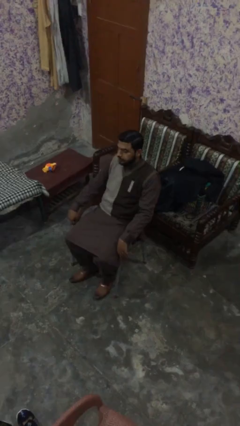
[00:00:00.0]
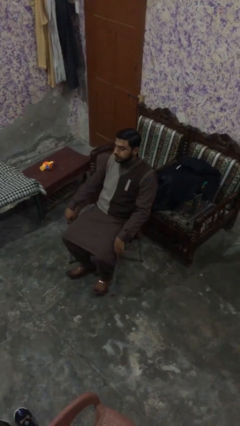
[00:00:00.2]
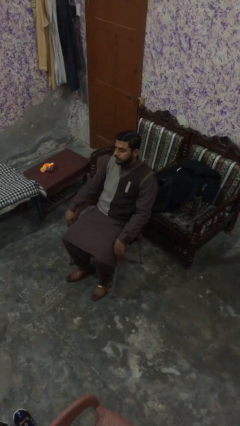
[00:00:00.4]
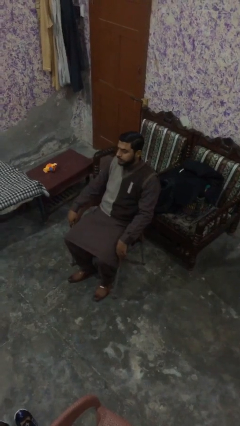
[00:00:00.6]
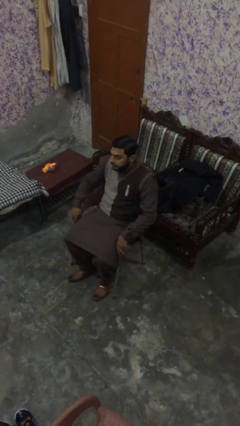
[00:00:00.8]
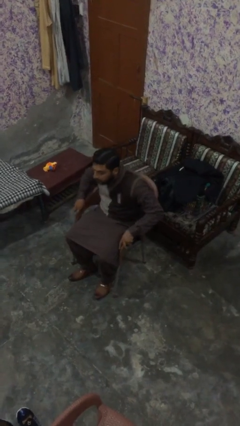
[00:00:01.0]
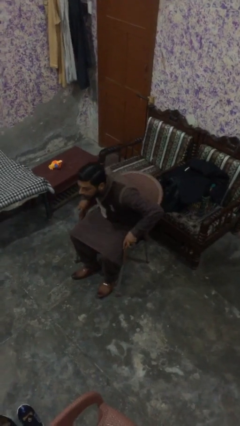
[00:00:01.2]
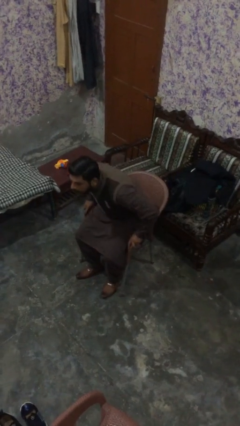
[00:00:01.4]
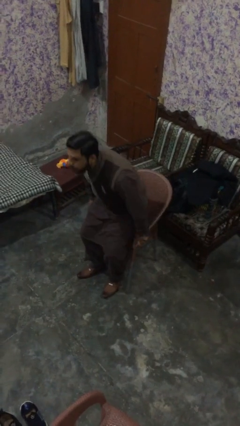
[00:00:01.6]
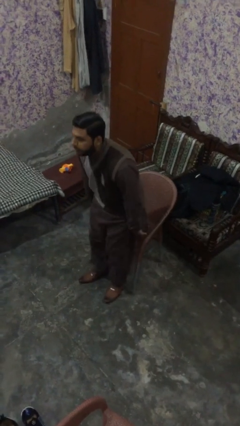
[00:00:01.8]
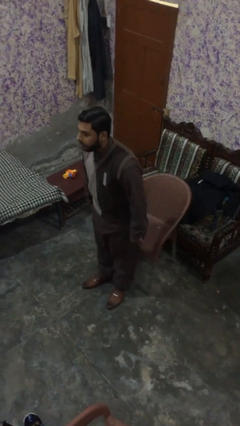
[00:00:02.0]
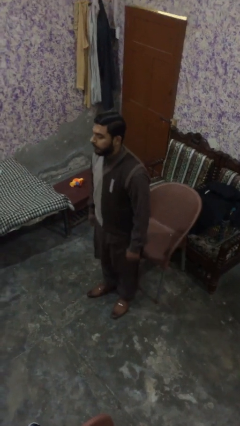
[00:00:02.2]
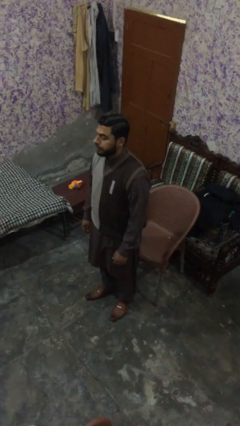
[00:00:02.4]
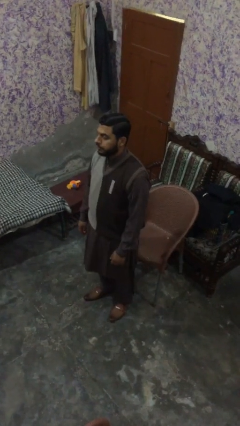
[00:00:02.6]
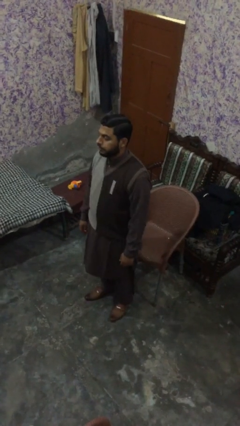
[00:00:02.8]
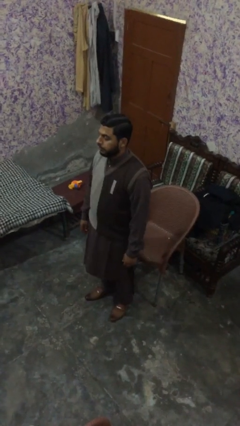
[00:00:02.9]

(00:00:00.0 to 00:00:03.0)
person stands up

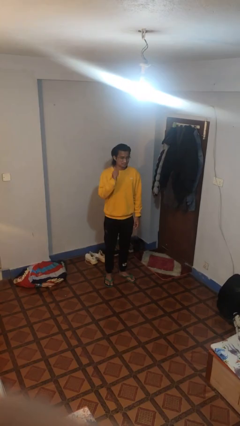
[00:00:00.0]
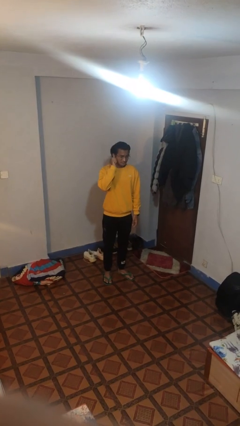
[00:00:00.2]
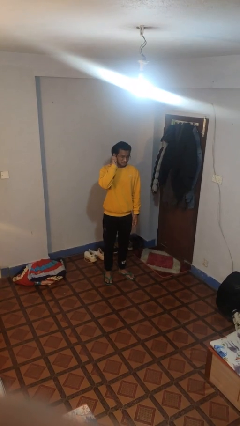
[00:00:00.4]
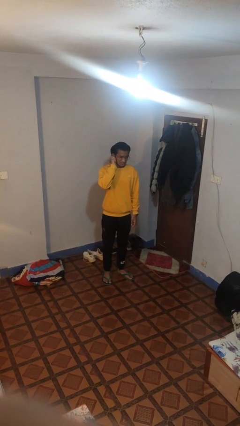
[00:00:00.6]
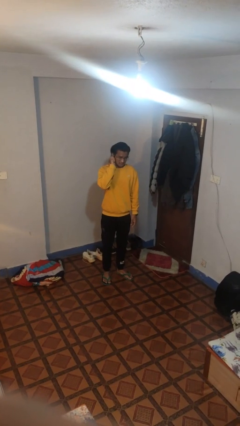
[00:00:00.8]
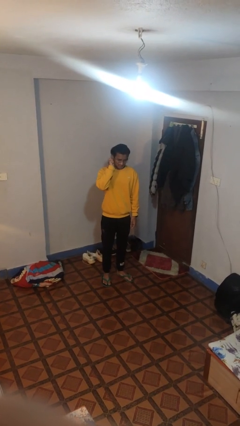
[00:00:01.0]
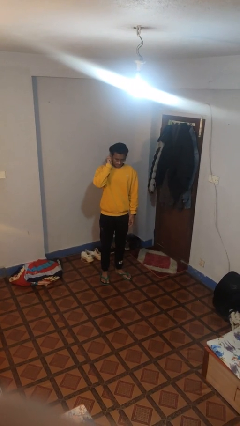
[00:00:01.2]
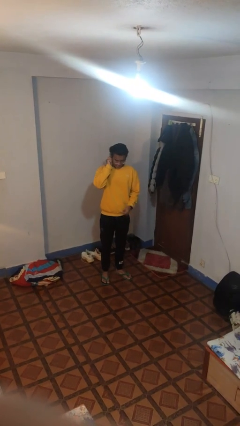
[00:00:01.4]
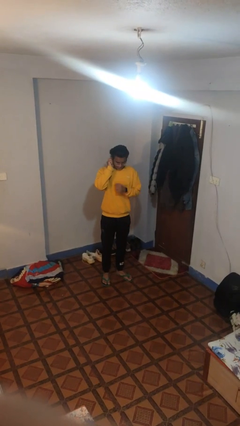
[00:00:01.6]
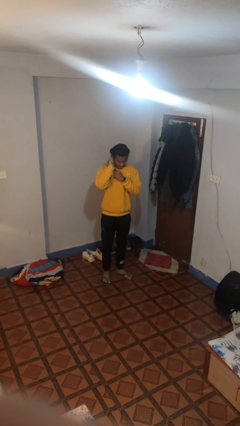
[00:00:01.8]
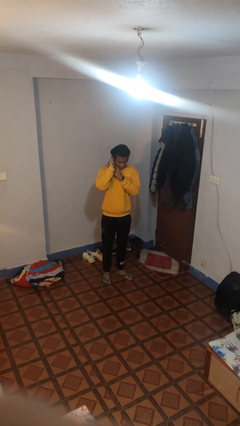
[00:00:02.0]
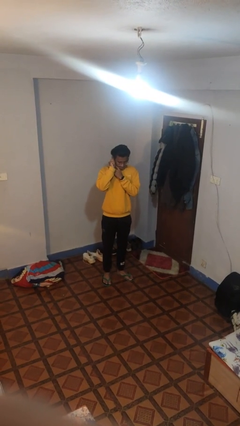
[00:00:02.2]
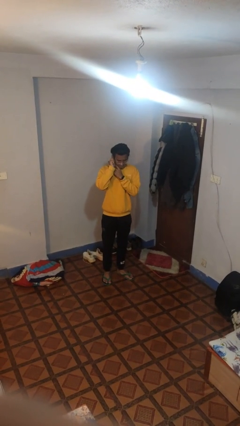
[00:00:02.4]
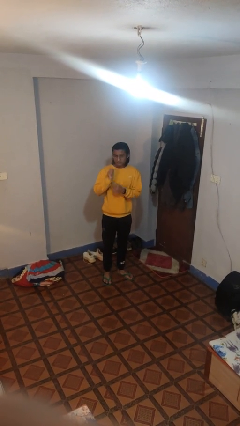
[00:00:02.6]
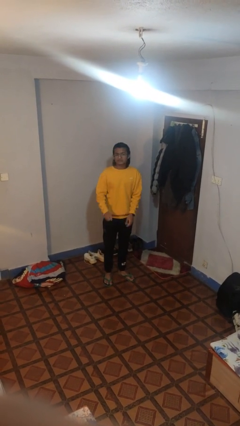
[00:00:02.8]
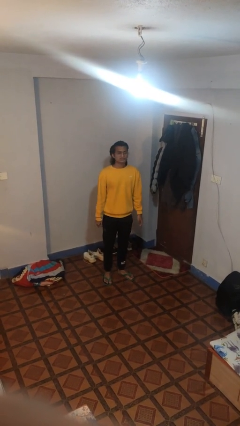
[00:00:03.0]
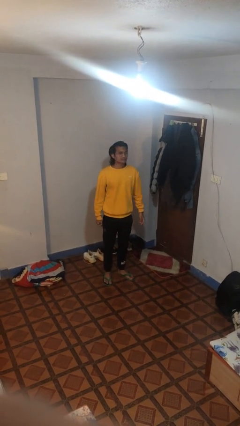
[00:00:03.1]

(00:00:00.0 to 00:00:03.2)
person puts on earrings

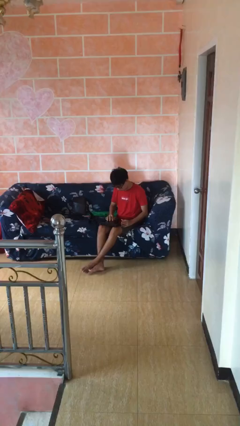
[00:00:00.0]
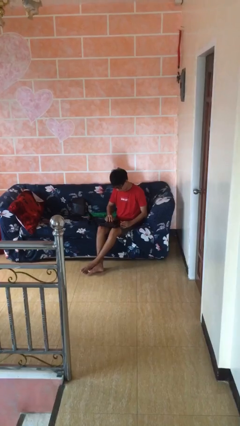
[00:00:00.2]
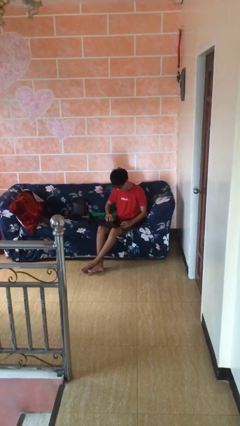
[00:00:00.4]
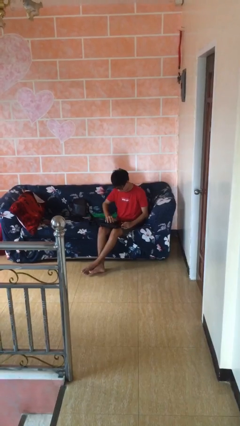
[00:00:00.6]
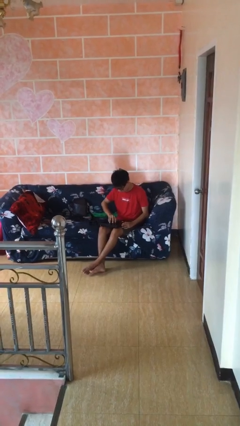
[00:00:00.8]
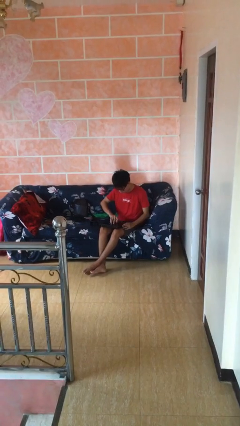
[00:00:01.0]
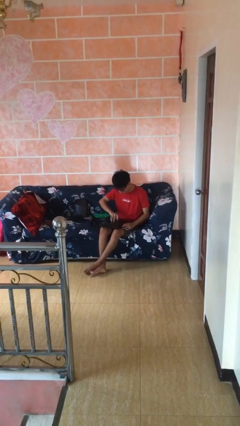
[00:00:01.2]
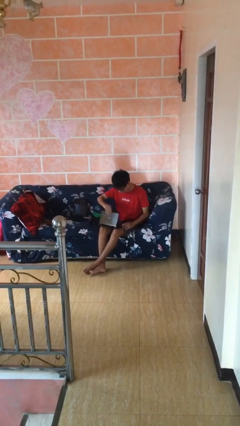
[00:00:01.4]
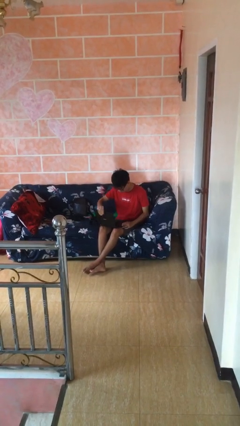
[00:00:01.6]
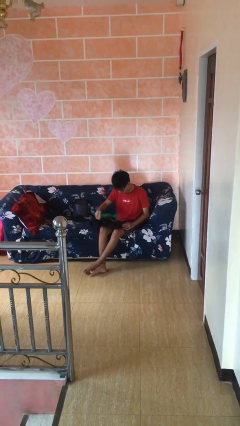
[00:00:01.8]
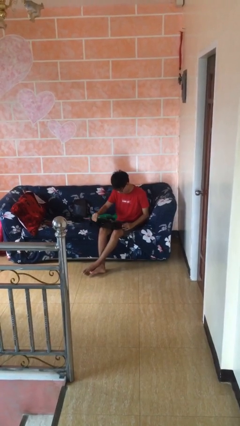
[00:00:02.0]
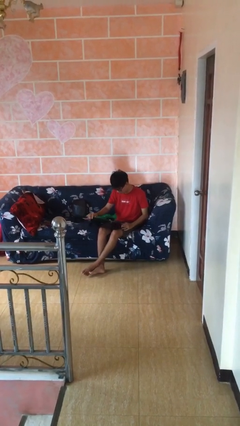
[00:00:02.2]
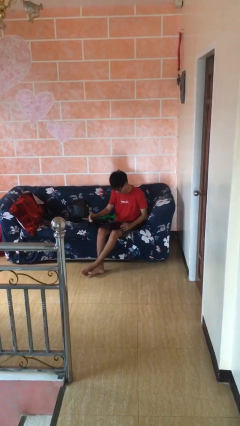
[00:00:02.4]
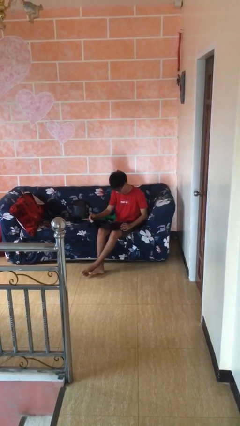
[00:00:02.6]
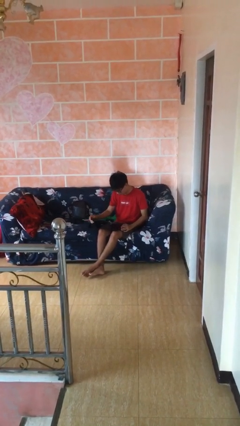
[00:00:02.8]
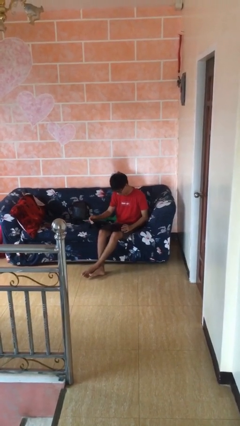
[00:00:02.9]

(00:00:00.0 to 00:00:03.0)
person interacts with laptop

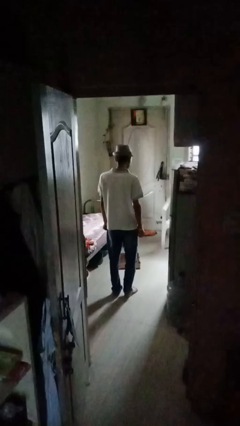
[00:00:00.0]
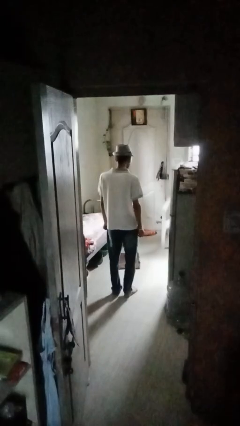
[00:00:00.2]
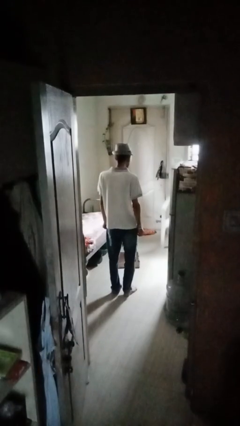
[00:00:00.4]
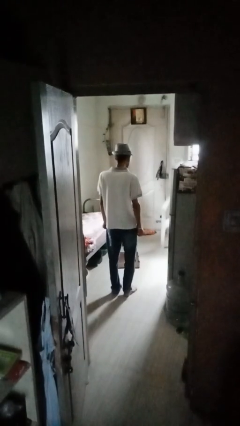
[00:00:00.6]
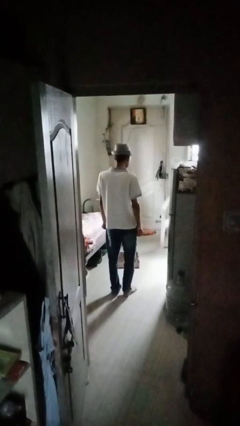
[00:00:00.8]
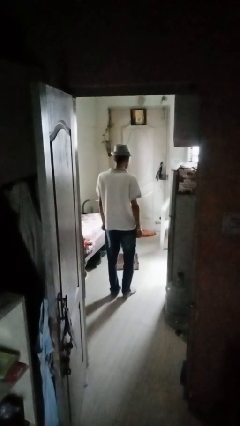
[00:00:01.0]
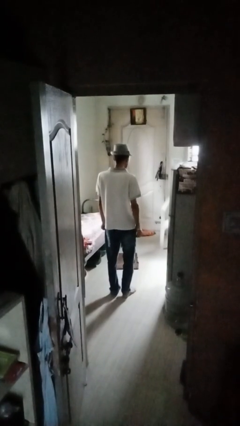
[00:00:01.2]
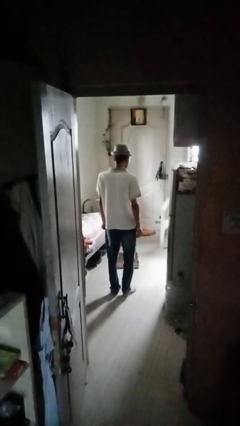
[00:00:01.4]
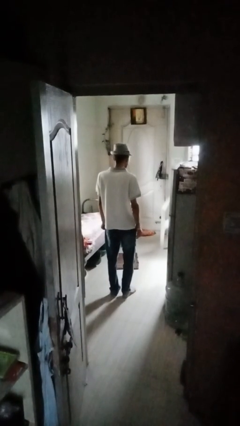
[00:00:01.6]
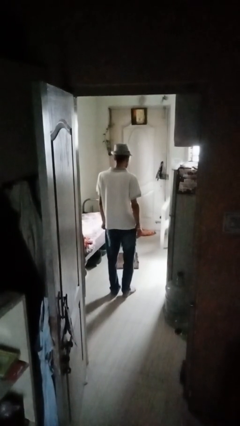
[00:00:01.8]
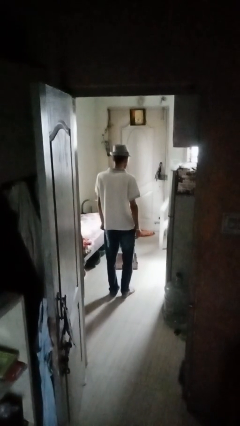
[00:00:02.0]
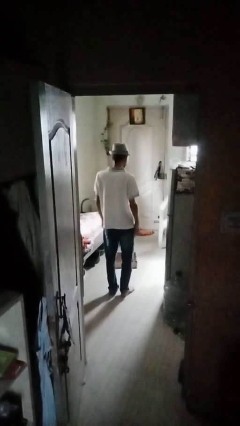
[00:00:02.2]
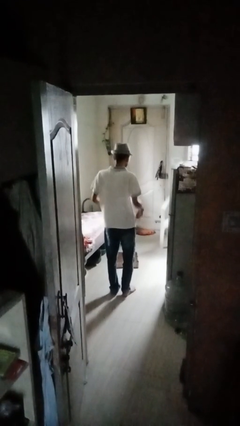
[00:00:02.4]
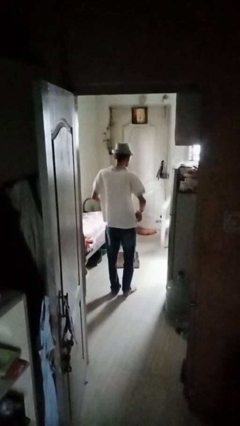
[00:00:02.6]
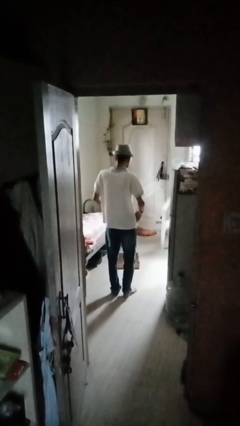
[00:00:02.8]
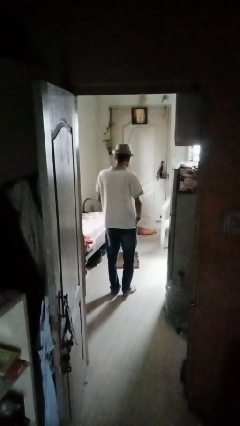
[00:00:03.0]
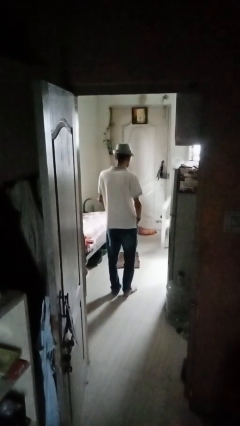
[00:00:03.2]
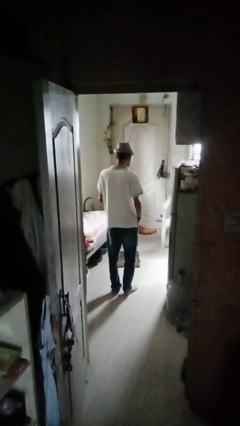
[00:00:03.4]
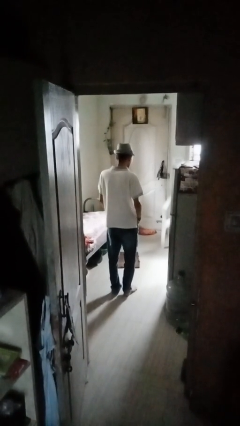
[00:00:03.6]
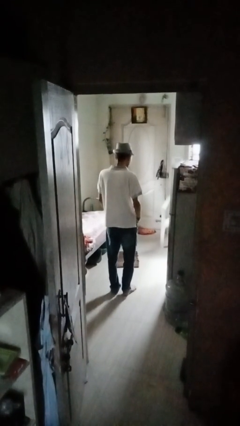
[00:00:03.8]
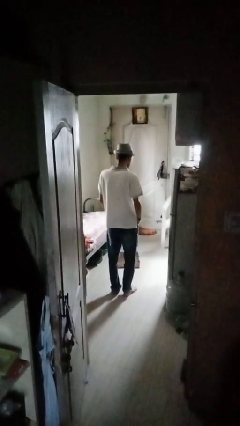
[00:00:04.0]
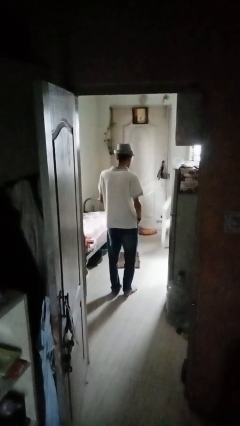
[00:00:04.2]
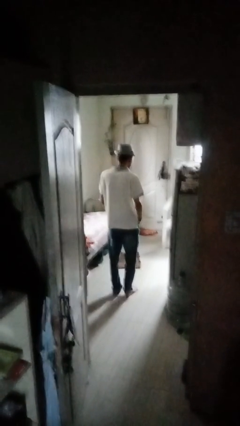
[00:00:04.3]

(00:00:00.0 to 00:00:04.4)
person puts hands in back pockets

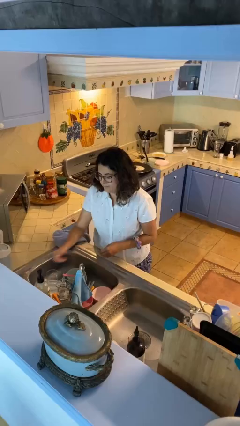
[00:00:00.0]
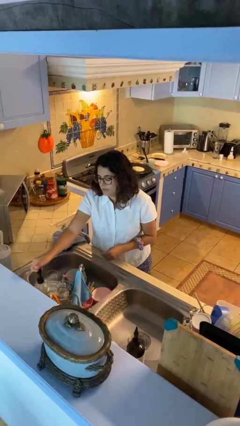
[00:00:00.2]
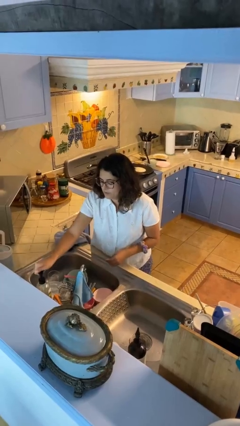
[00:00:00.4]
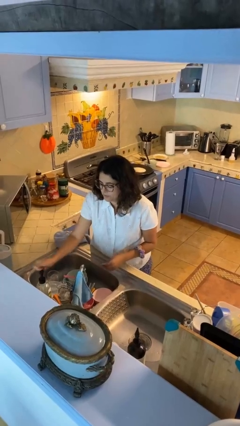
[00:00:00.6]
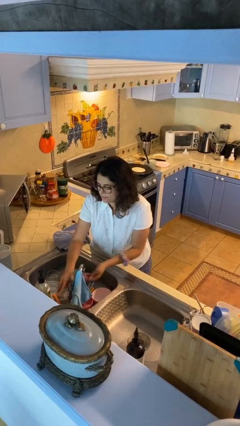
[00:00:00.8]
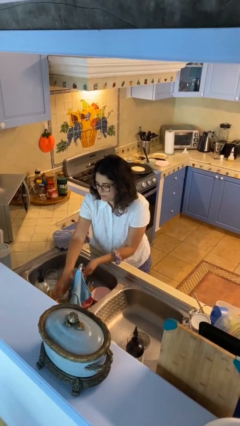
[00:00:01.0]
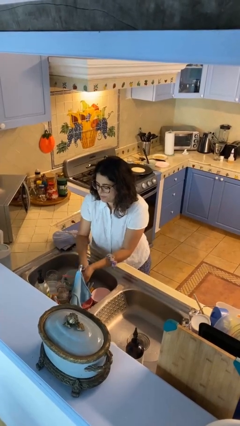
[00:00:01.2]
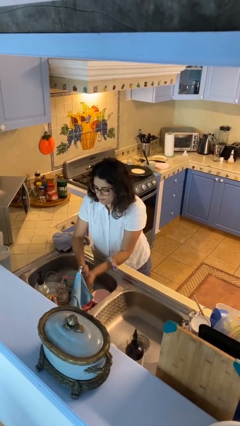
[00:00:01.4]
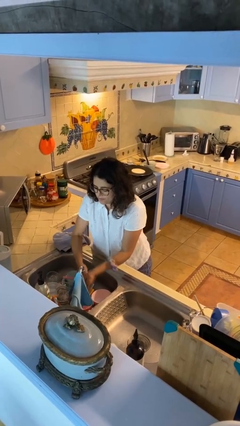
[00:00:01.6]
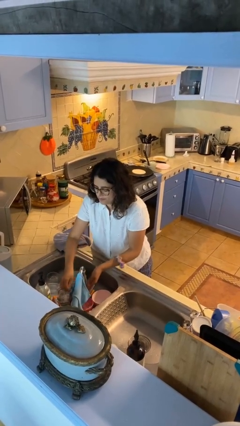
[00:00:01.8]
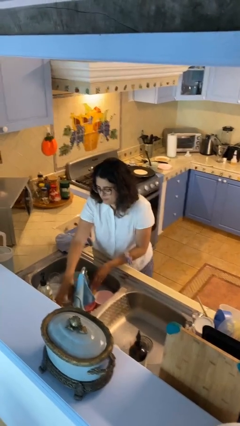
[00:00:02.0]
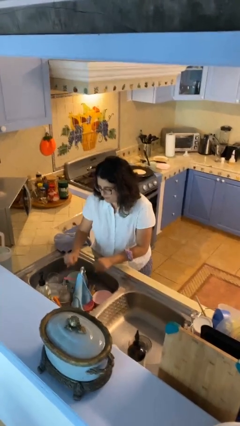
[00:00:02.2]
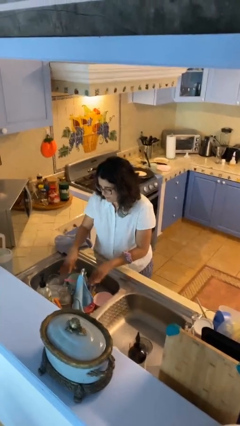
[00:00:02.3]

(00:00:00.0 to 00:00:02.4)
person washes hands

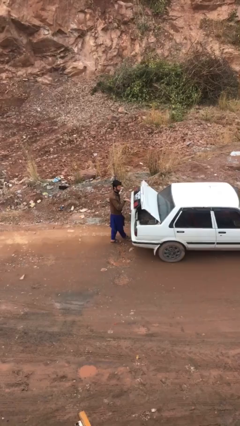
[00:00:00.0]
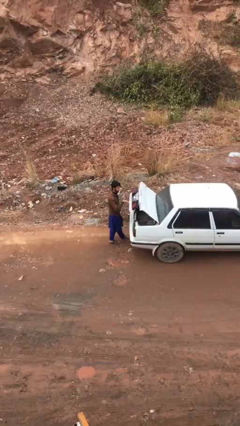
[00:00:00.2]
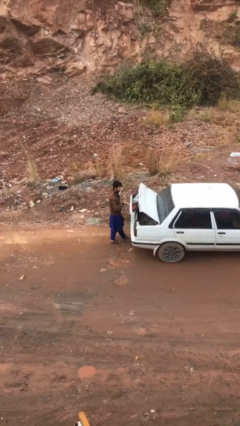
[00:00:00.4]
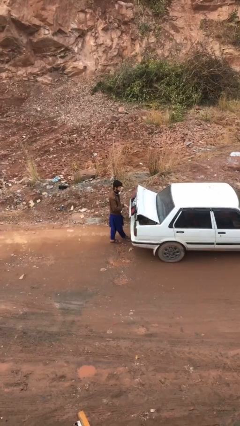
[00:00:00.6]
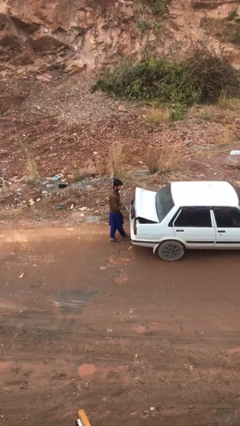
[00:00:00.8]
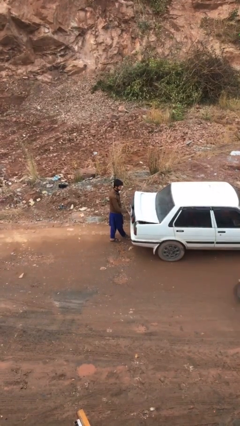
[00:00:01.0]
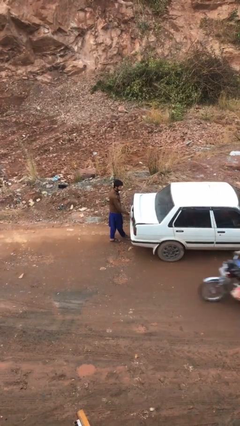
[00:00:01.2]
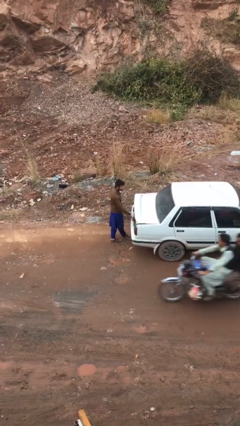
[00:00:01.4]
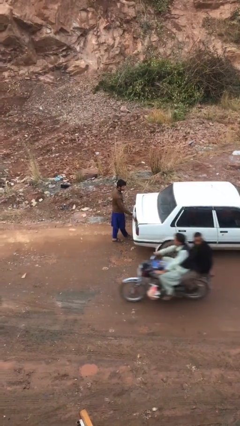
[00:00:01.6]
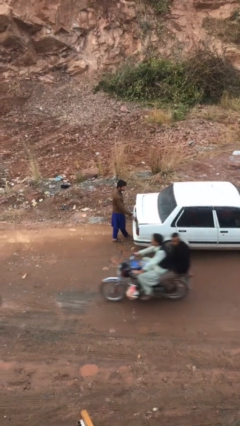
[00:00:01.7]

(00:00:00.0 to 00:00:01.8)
person closes car trunk
